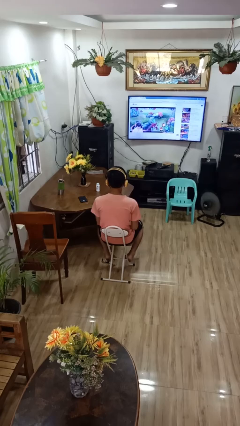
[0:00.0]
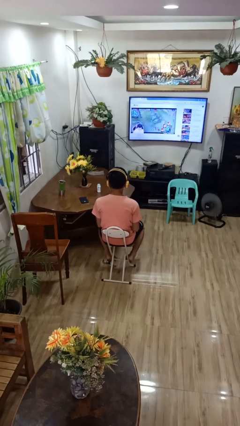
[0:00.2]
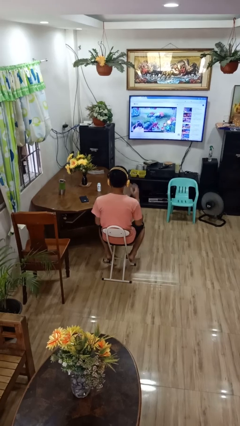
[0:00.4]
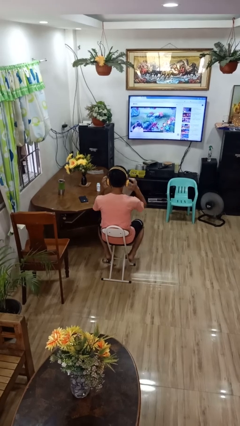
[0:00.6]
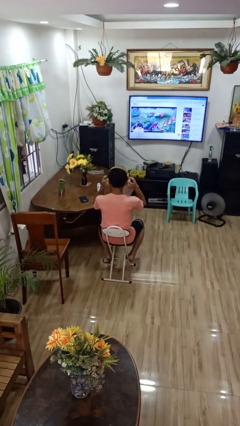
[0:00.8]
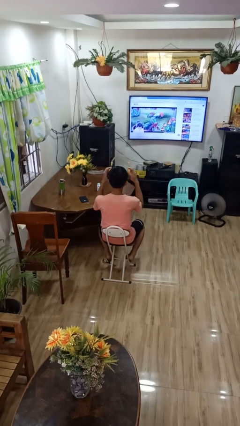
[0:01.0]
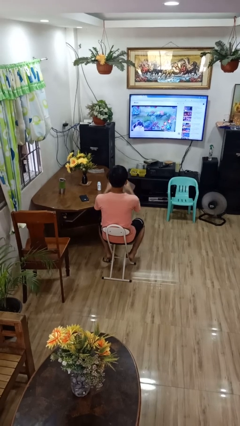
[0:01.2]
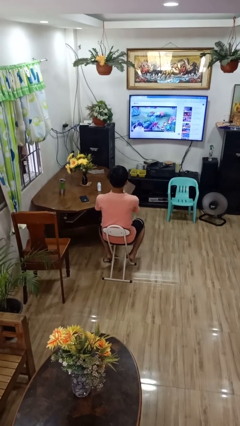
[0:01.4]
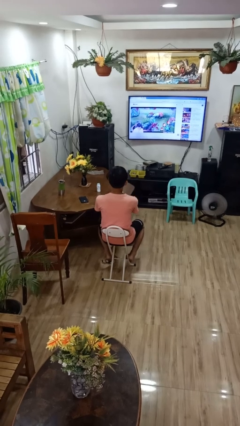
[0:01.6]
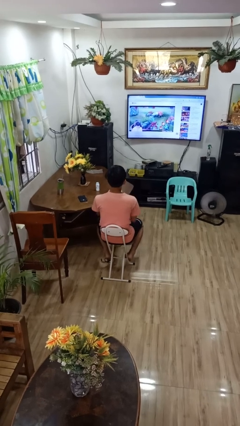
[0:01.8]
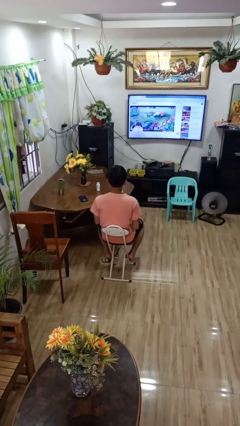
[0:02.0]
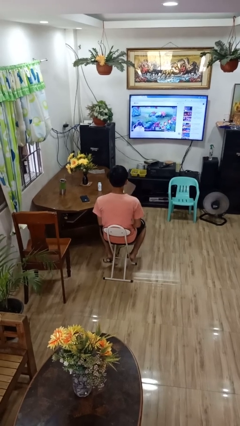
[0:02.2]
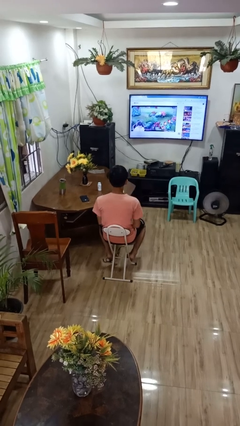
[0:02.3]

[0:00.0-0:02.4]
person takes off headphones

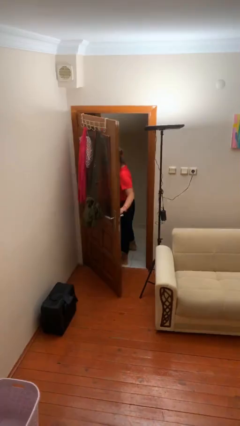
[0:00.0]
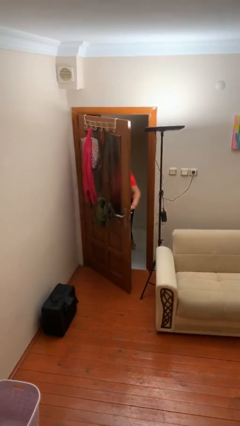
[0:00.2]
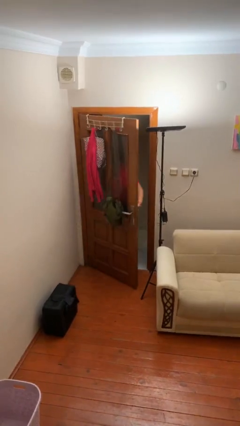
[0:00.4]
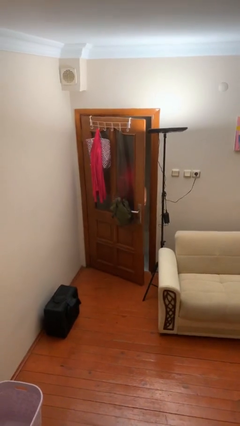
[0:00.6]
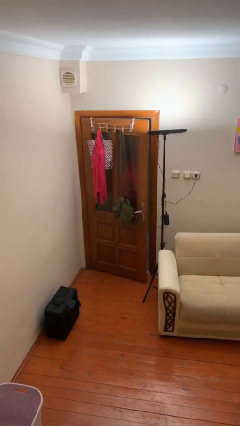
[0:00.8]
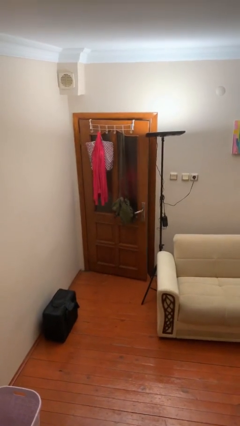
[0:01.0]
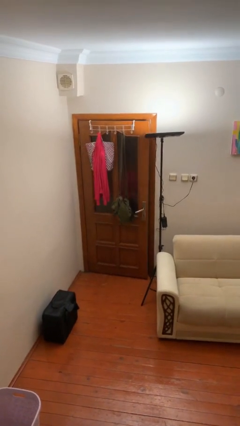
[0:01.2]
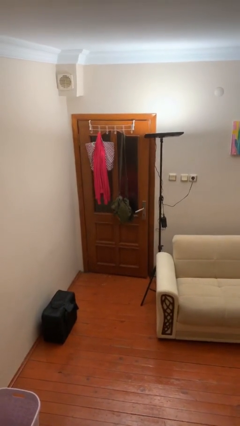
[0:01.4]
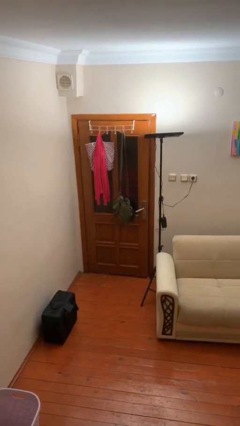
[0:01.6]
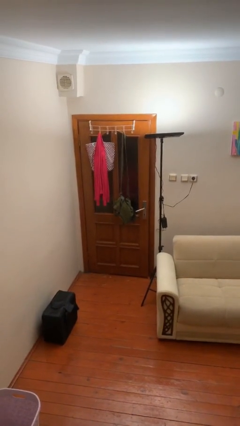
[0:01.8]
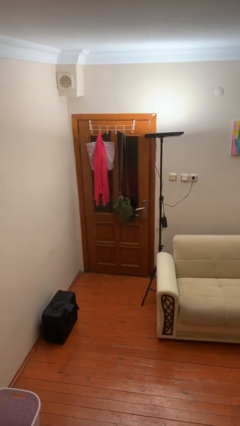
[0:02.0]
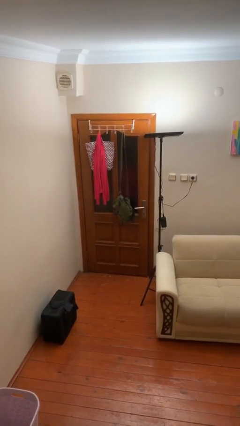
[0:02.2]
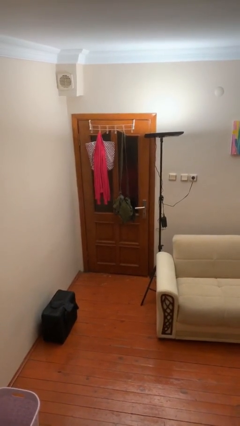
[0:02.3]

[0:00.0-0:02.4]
person closes facility door

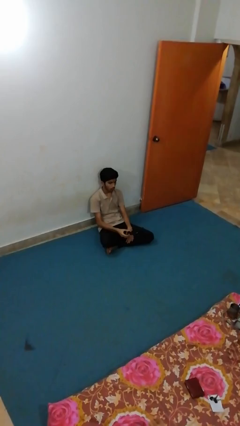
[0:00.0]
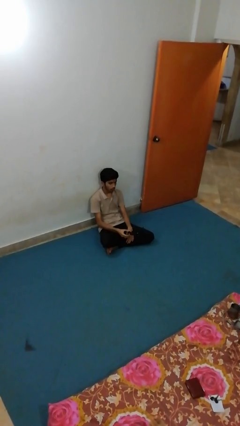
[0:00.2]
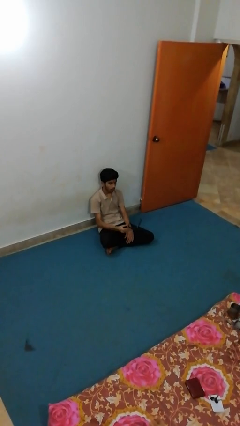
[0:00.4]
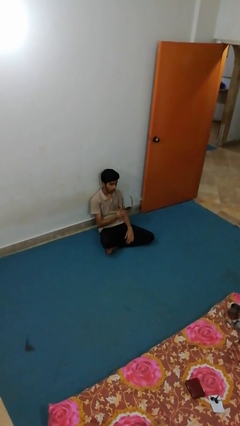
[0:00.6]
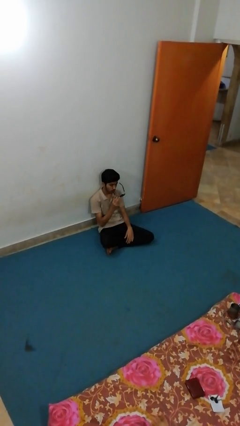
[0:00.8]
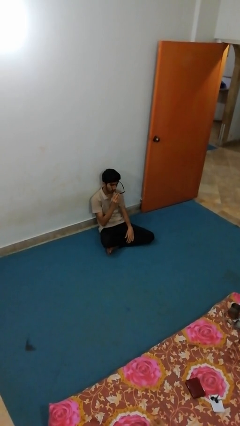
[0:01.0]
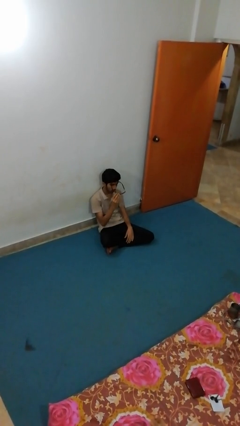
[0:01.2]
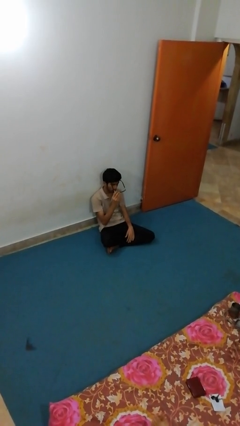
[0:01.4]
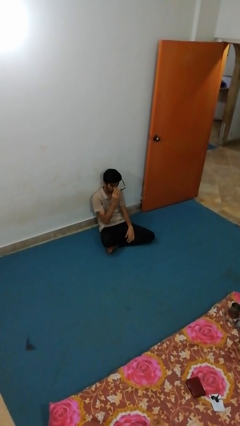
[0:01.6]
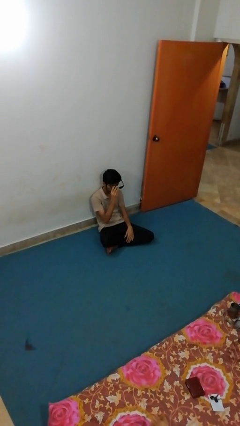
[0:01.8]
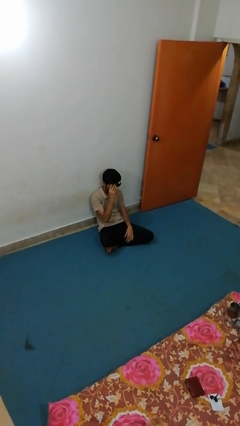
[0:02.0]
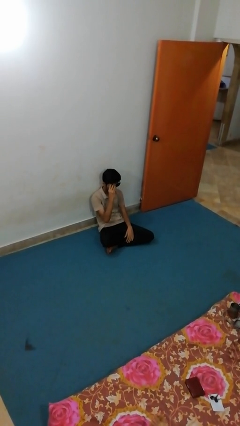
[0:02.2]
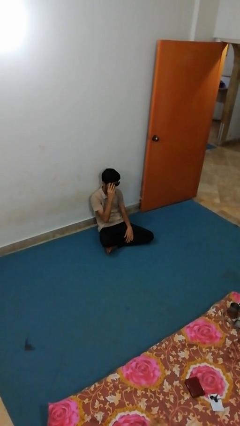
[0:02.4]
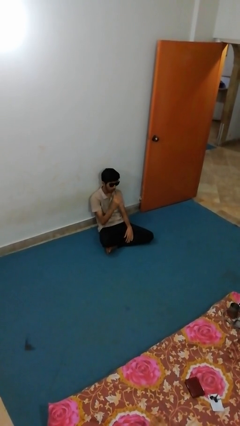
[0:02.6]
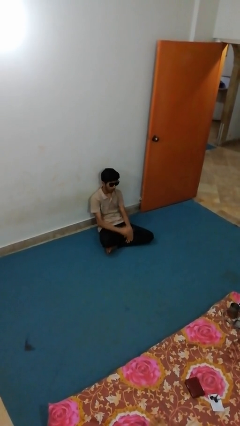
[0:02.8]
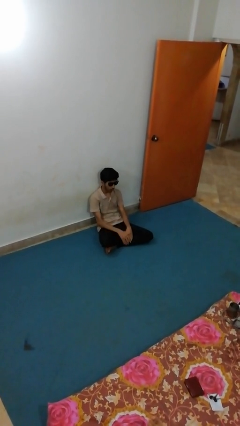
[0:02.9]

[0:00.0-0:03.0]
person puts on sunglasses

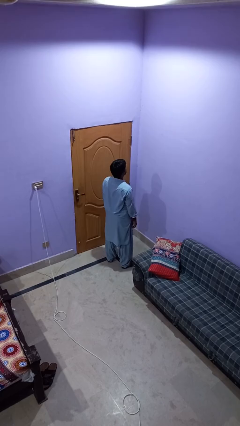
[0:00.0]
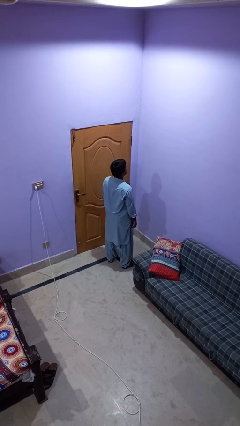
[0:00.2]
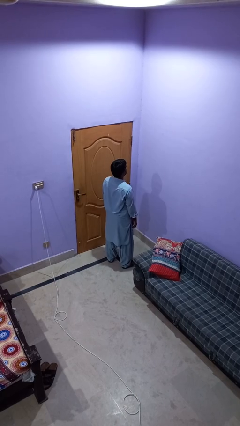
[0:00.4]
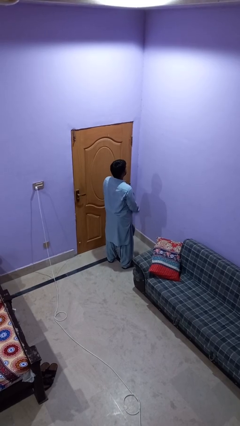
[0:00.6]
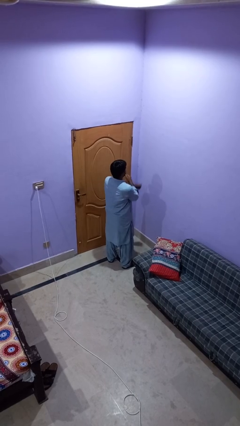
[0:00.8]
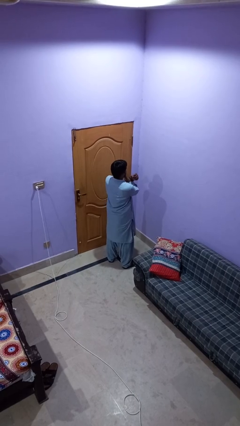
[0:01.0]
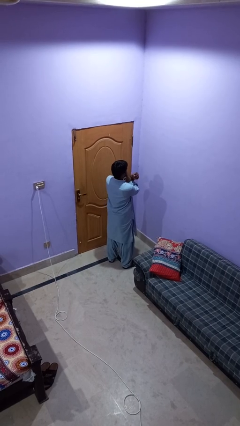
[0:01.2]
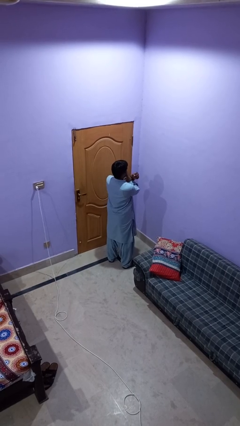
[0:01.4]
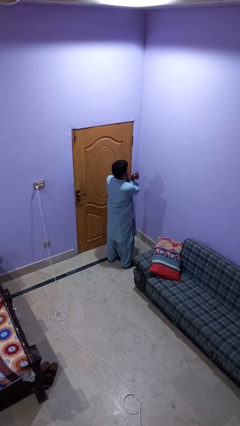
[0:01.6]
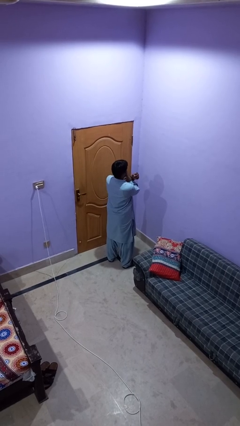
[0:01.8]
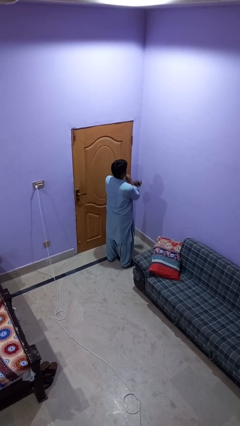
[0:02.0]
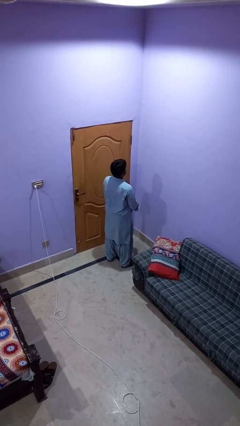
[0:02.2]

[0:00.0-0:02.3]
person gestures arms x

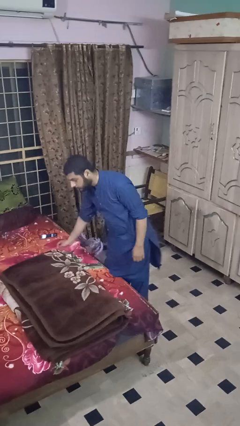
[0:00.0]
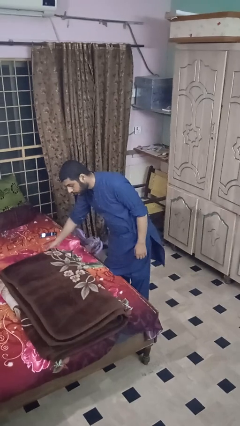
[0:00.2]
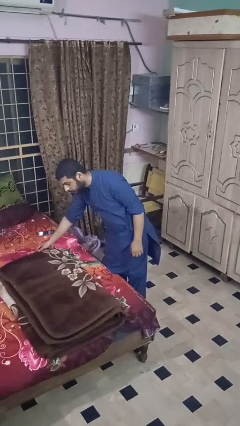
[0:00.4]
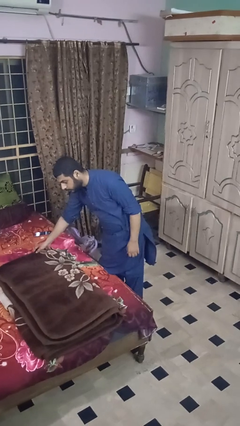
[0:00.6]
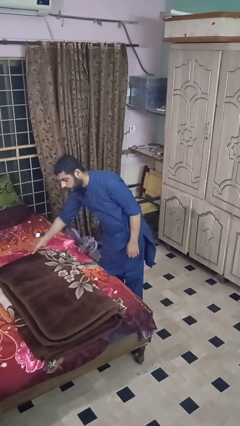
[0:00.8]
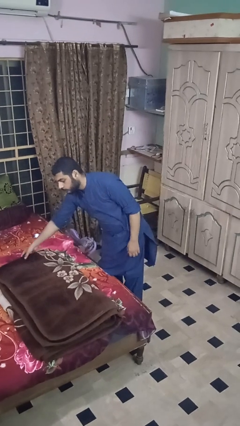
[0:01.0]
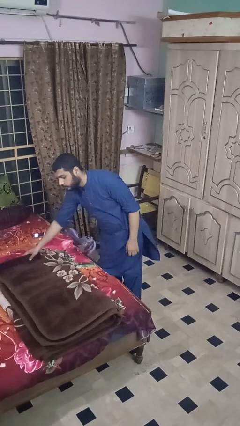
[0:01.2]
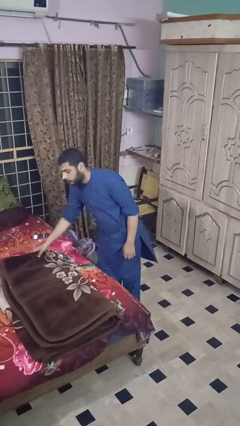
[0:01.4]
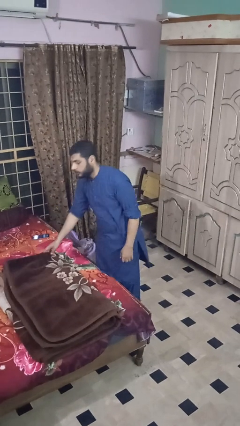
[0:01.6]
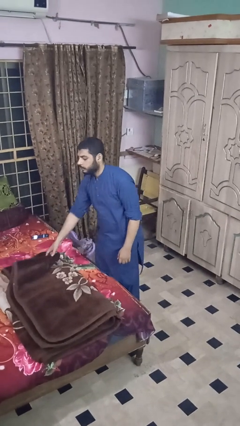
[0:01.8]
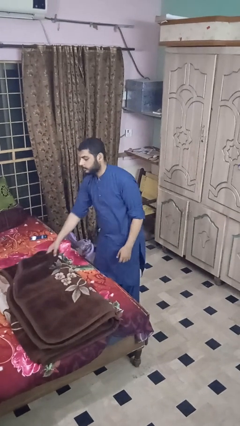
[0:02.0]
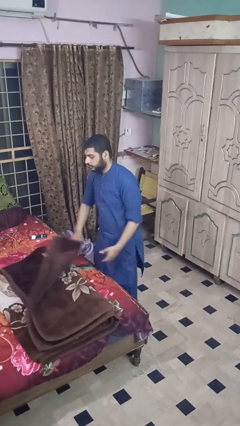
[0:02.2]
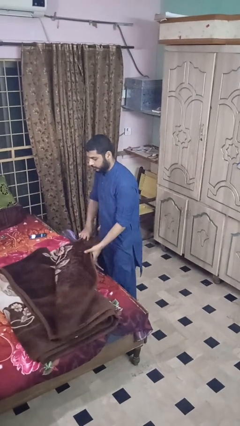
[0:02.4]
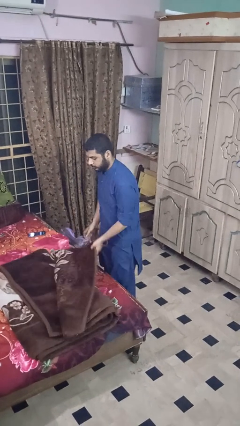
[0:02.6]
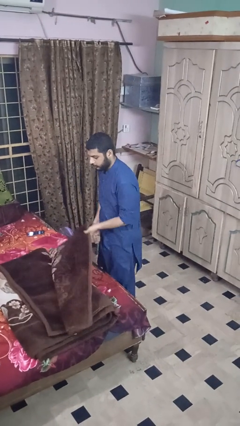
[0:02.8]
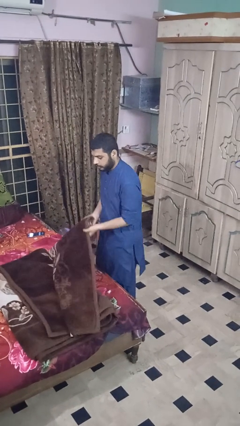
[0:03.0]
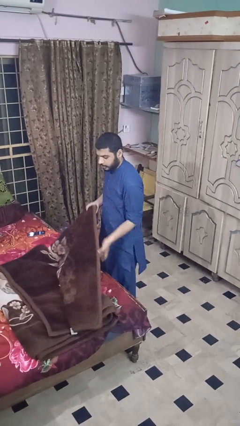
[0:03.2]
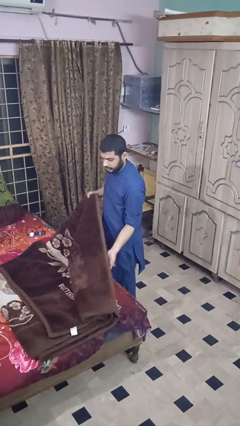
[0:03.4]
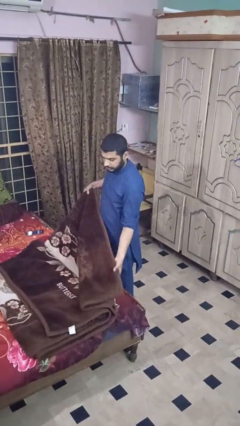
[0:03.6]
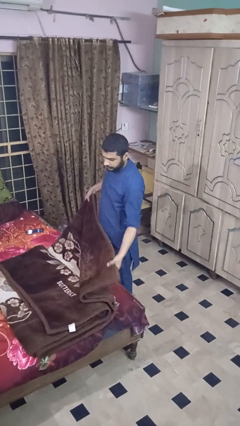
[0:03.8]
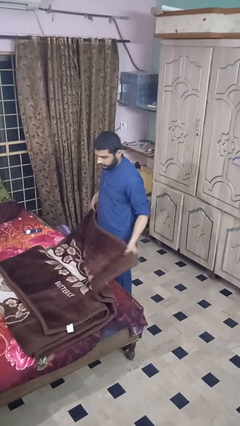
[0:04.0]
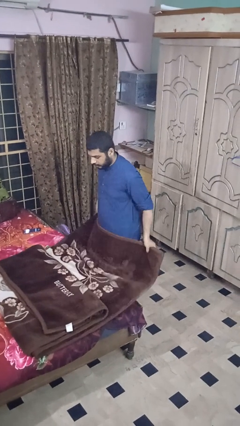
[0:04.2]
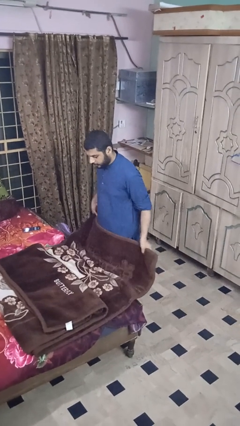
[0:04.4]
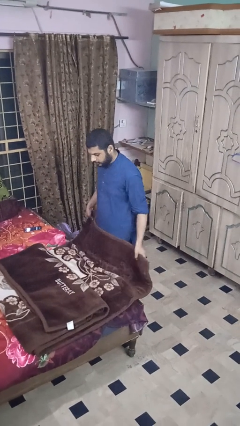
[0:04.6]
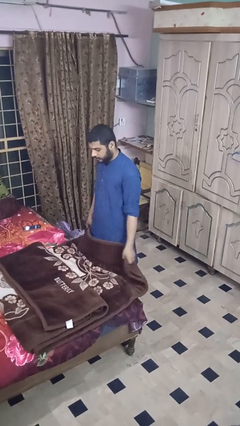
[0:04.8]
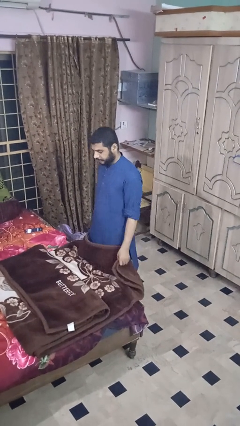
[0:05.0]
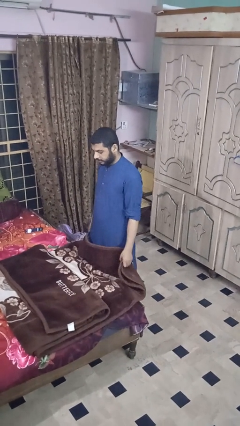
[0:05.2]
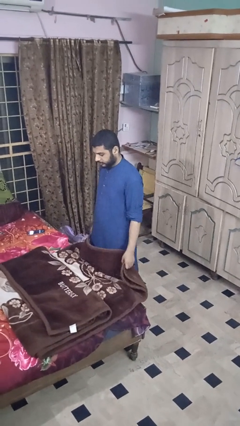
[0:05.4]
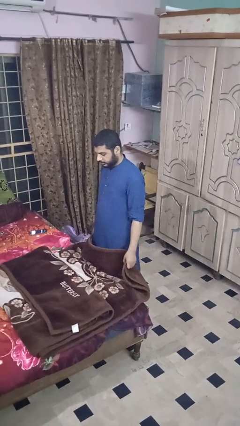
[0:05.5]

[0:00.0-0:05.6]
person unfolds blanket

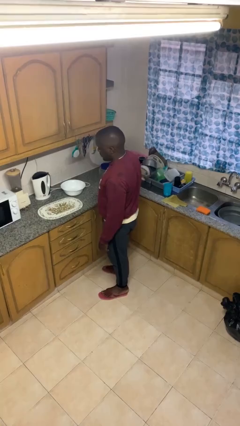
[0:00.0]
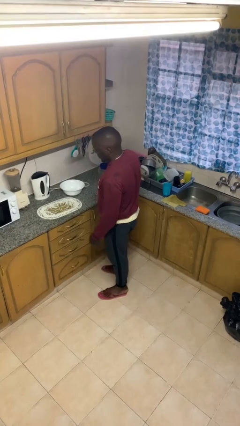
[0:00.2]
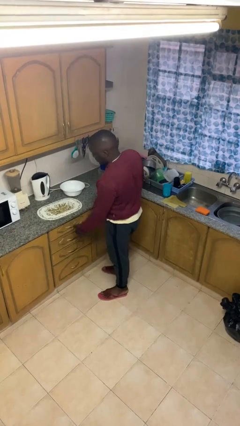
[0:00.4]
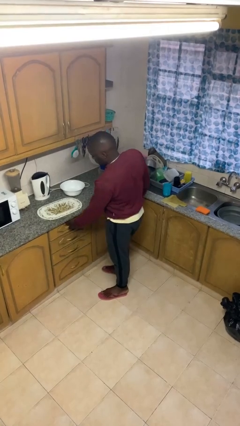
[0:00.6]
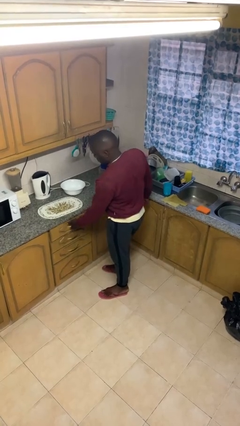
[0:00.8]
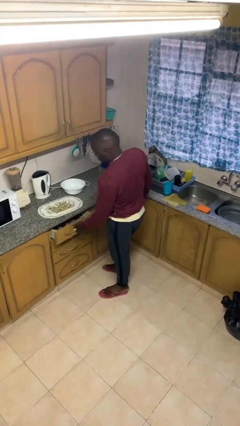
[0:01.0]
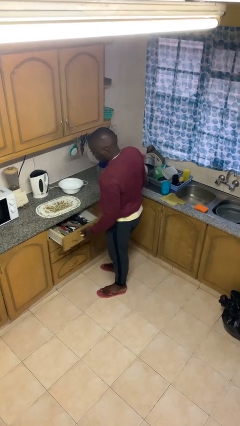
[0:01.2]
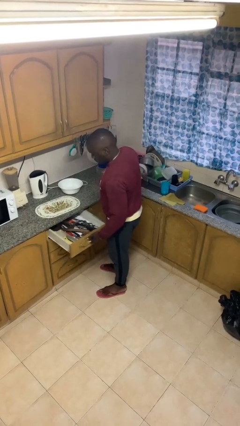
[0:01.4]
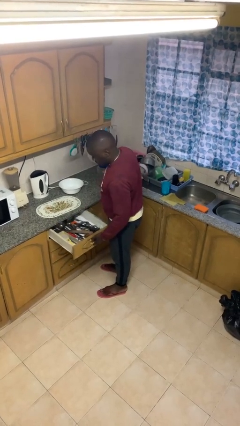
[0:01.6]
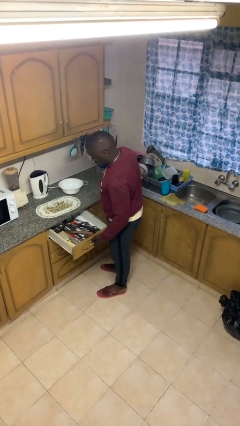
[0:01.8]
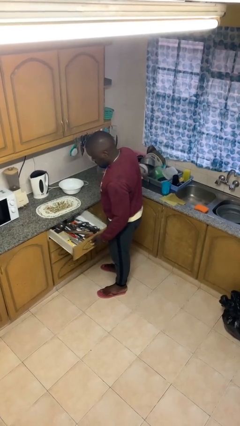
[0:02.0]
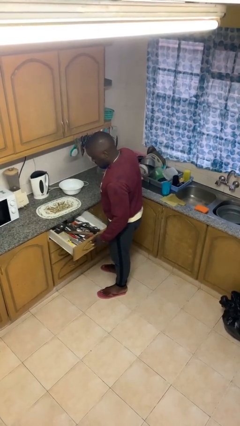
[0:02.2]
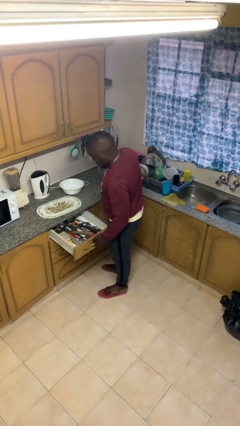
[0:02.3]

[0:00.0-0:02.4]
person opens kitchen drawer
